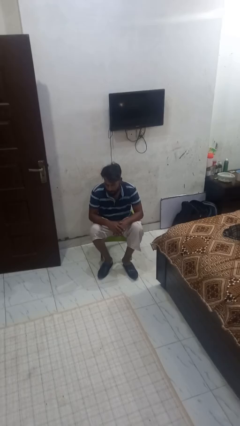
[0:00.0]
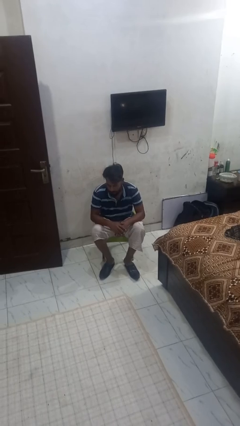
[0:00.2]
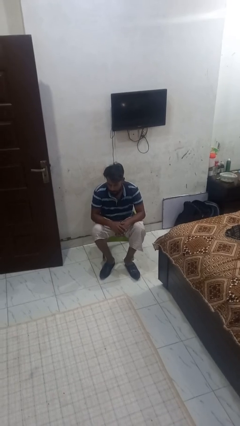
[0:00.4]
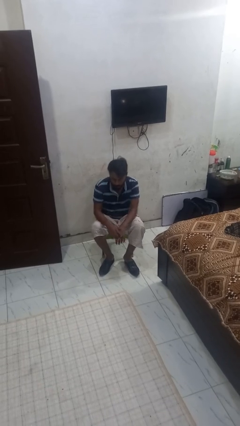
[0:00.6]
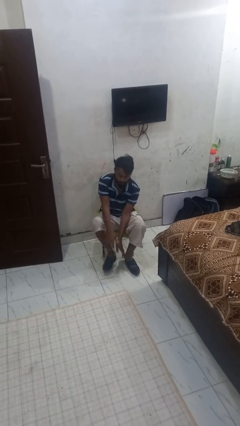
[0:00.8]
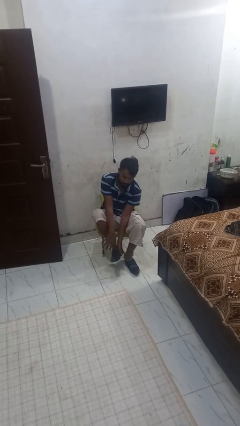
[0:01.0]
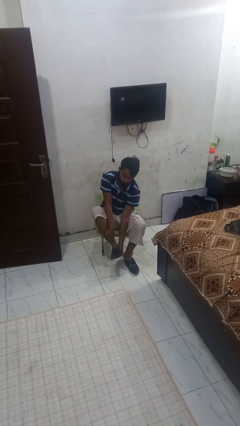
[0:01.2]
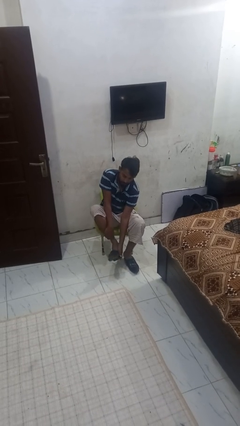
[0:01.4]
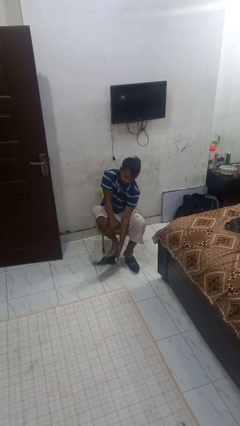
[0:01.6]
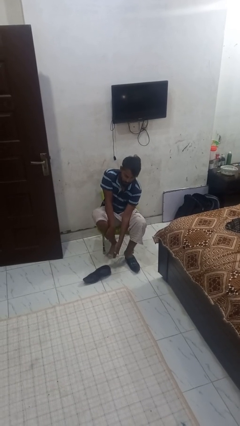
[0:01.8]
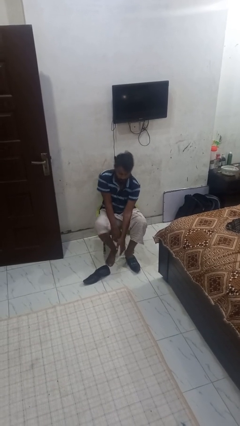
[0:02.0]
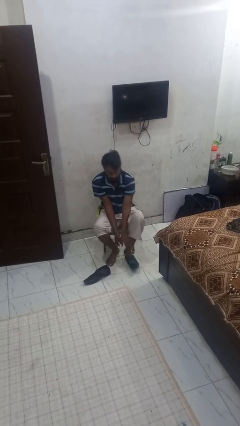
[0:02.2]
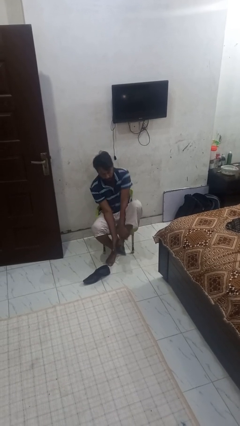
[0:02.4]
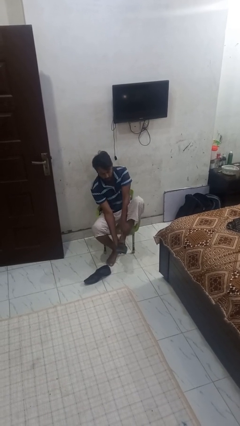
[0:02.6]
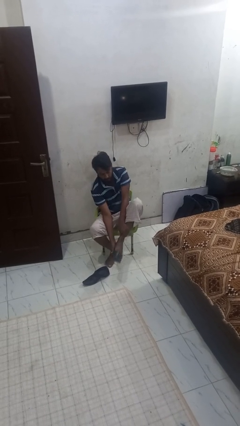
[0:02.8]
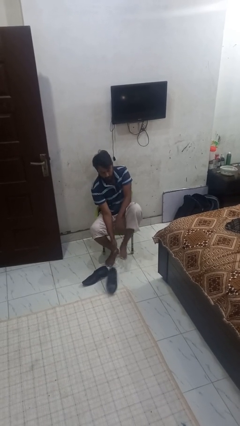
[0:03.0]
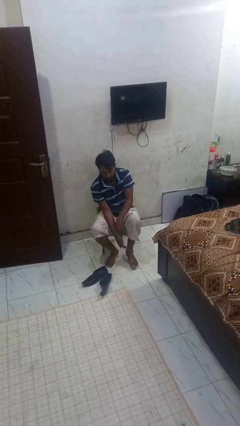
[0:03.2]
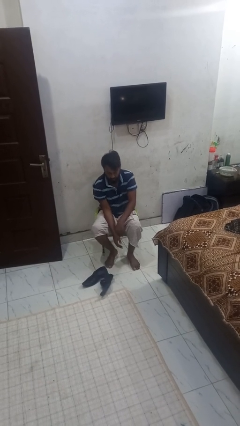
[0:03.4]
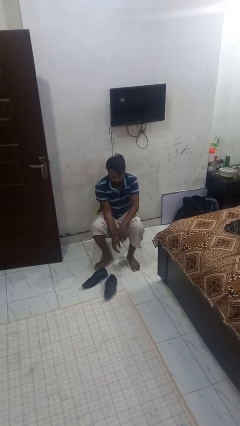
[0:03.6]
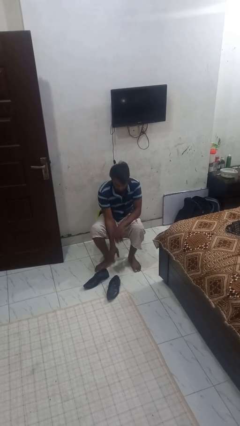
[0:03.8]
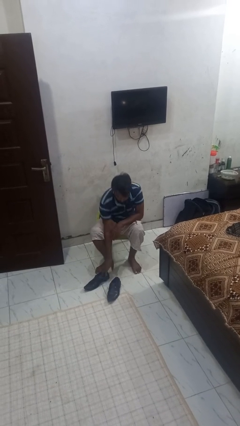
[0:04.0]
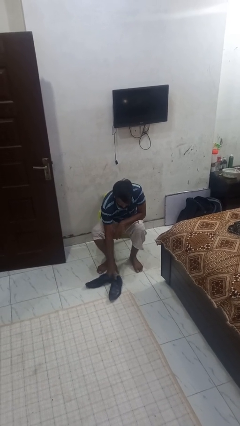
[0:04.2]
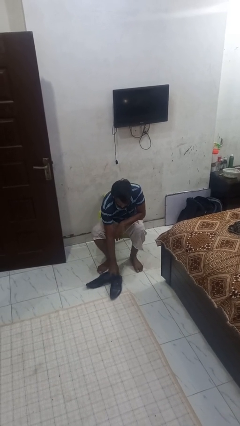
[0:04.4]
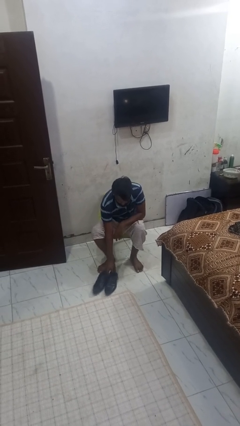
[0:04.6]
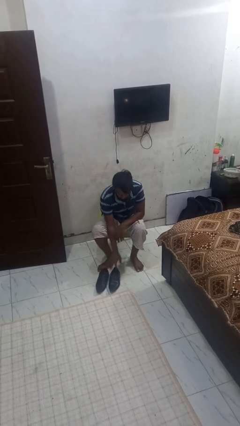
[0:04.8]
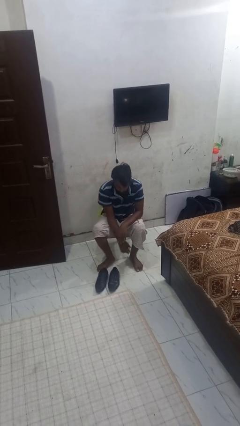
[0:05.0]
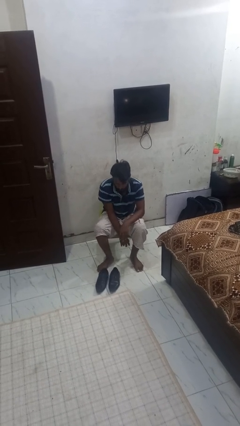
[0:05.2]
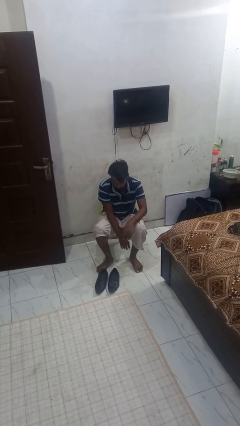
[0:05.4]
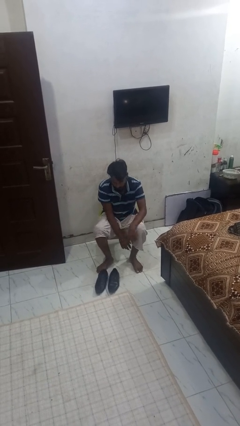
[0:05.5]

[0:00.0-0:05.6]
person takes off shoes

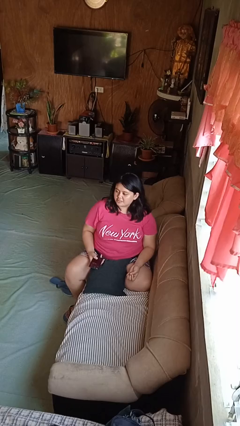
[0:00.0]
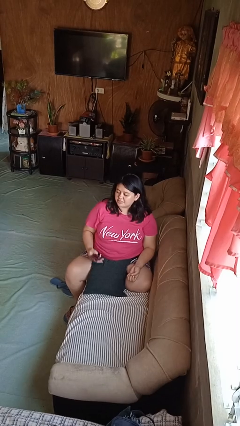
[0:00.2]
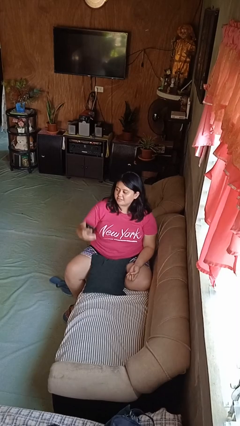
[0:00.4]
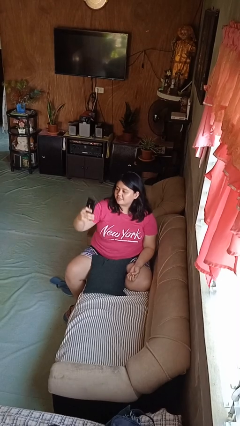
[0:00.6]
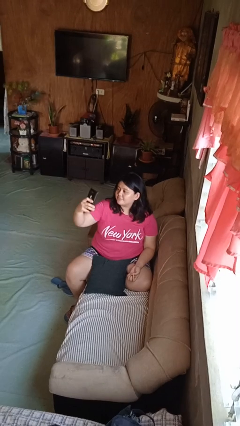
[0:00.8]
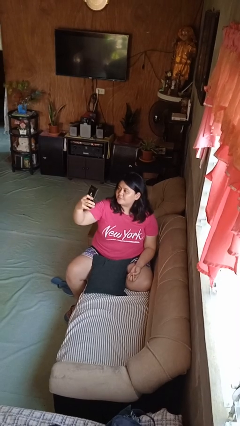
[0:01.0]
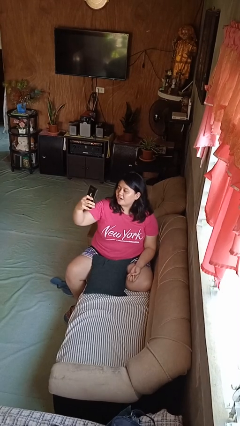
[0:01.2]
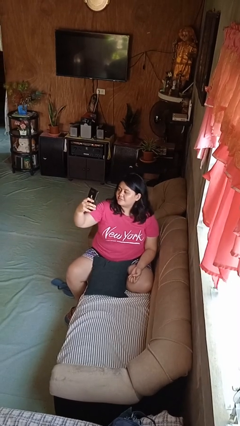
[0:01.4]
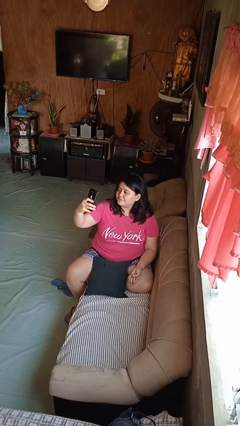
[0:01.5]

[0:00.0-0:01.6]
person takes selfie

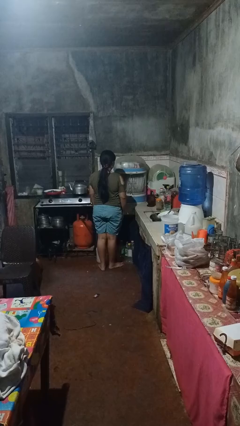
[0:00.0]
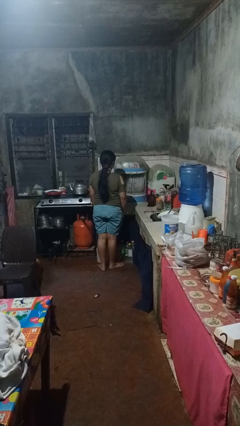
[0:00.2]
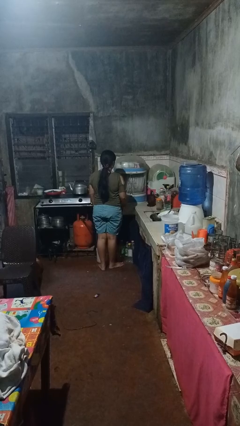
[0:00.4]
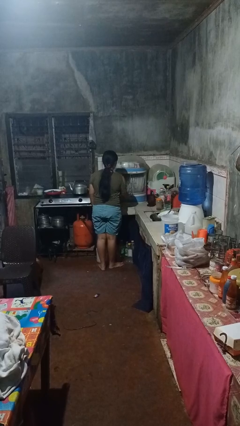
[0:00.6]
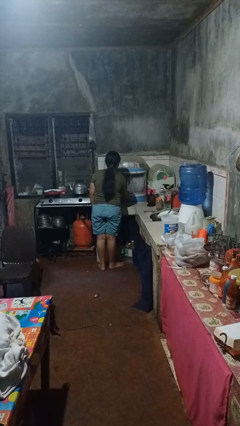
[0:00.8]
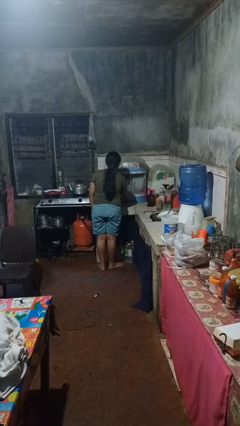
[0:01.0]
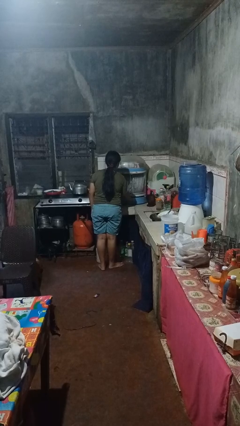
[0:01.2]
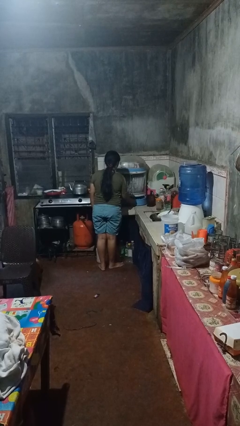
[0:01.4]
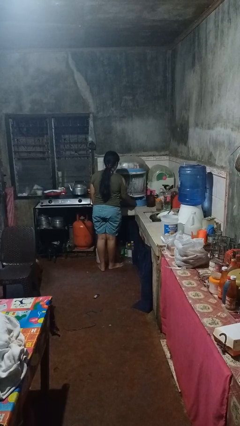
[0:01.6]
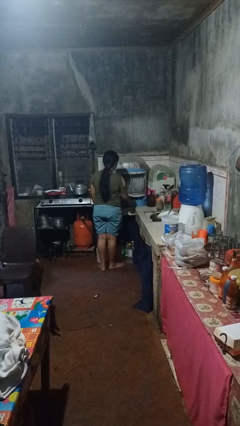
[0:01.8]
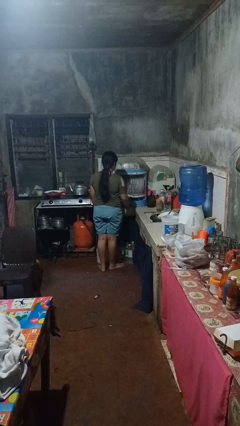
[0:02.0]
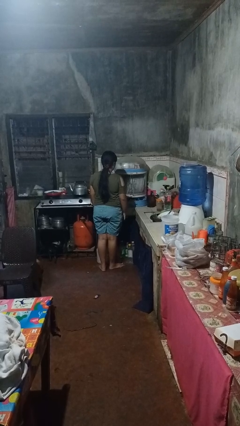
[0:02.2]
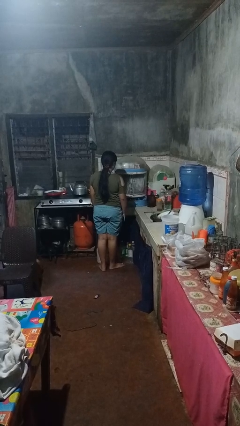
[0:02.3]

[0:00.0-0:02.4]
person opens kitchen drawer

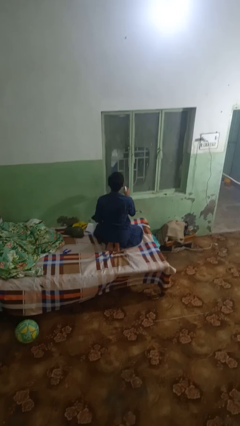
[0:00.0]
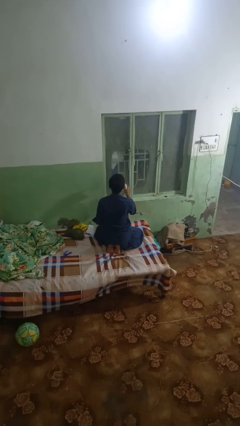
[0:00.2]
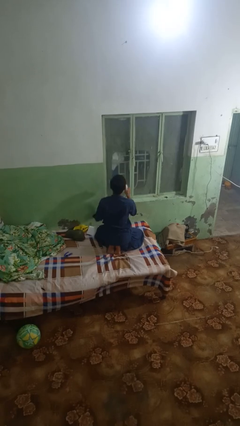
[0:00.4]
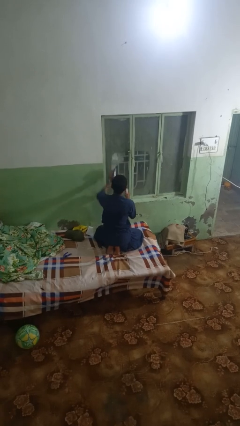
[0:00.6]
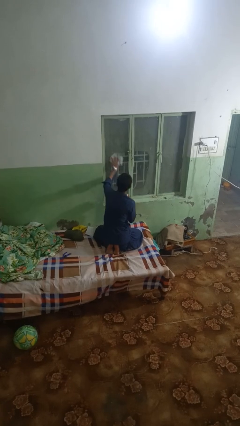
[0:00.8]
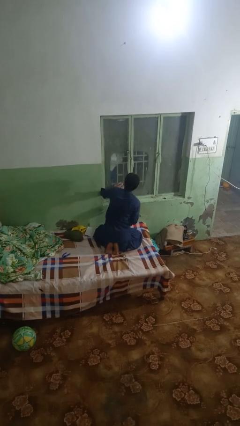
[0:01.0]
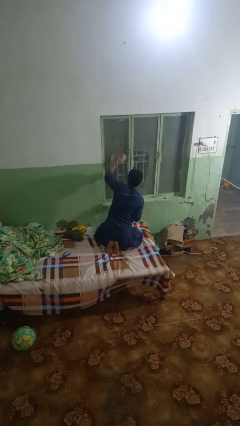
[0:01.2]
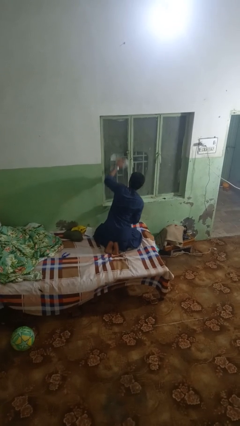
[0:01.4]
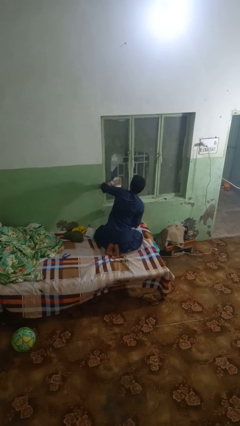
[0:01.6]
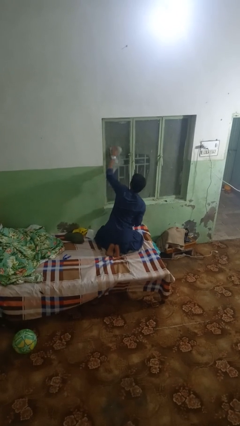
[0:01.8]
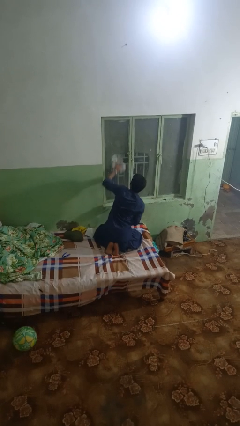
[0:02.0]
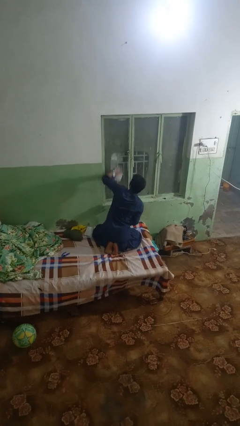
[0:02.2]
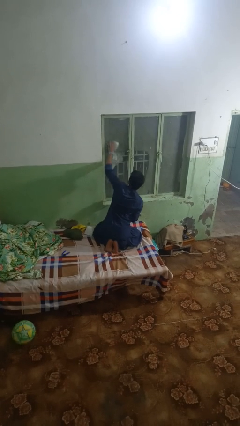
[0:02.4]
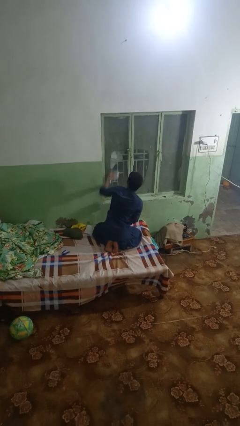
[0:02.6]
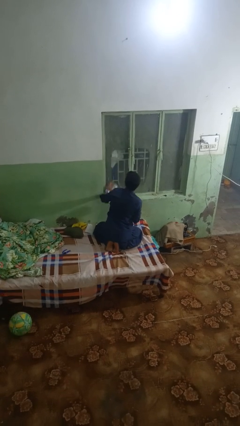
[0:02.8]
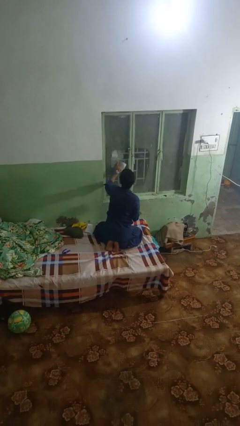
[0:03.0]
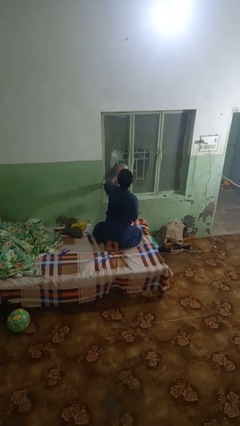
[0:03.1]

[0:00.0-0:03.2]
person washes window

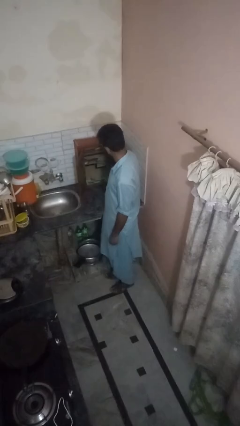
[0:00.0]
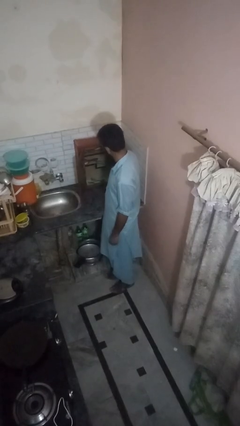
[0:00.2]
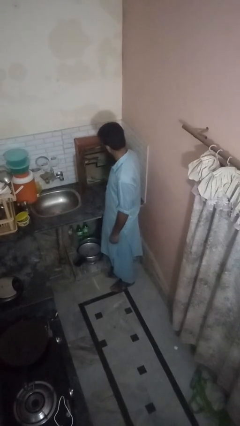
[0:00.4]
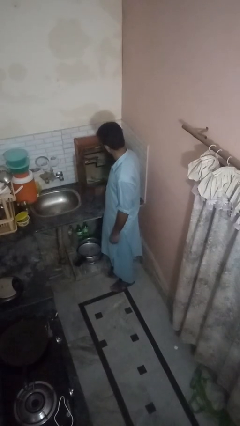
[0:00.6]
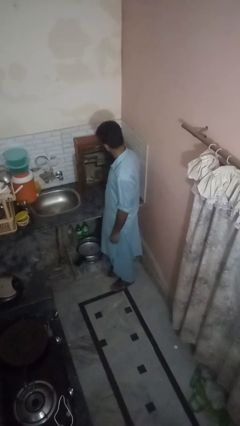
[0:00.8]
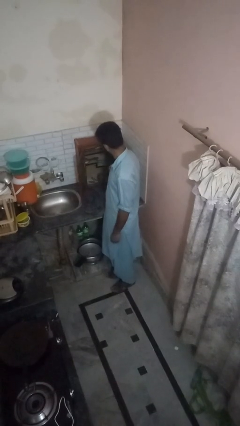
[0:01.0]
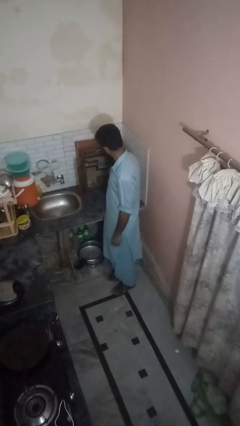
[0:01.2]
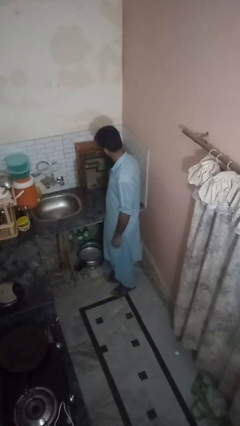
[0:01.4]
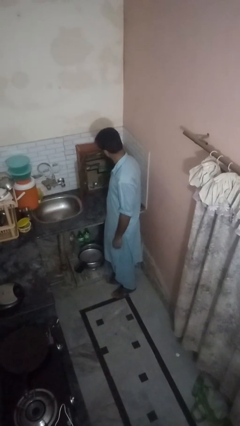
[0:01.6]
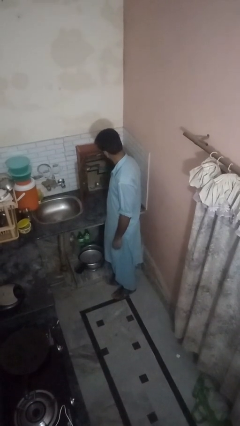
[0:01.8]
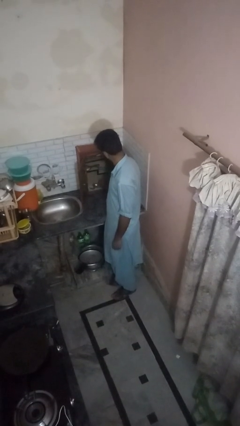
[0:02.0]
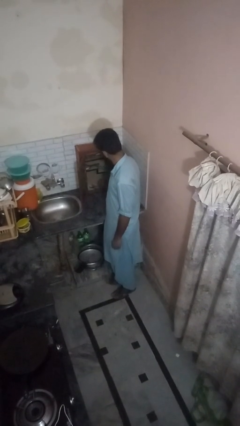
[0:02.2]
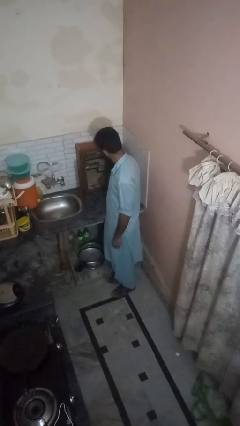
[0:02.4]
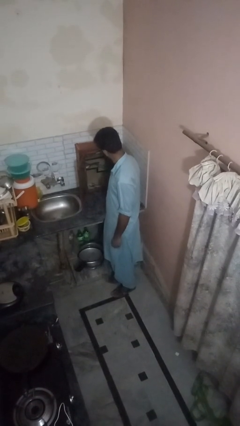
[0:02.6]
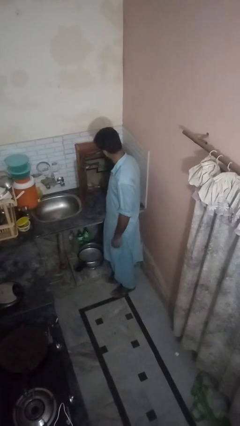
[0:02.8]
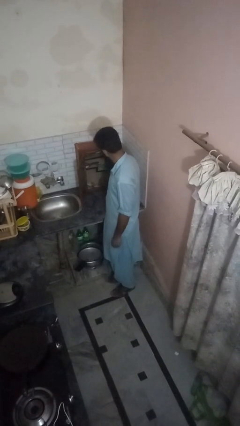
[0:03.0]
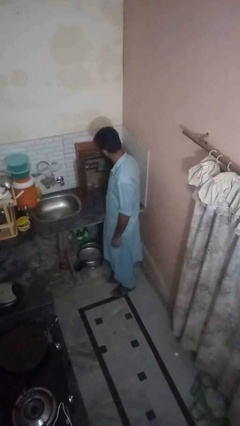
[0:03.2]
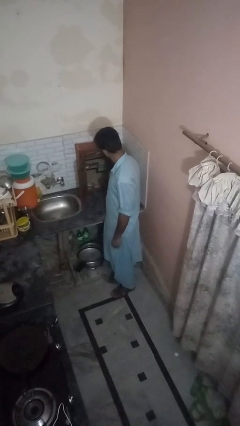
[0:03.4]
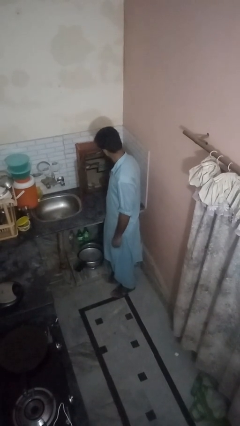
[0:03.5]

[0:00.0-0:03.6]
person searches in kitchen drawer

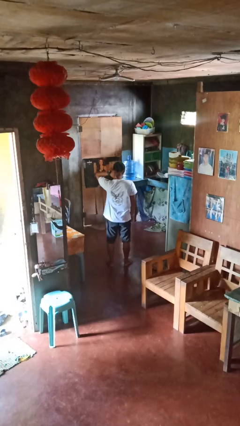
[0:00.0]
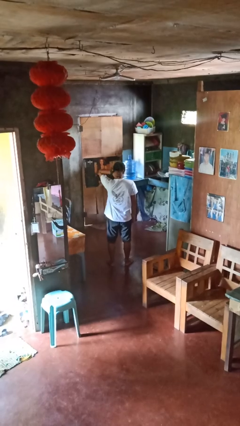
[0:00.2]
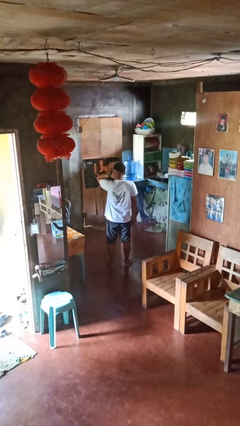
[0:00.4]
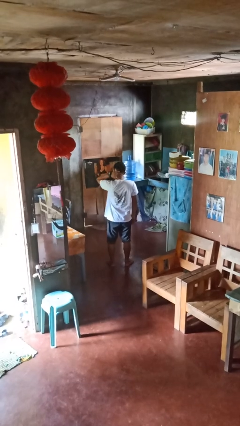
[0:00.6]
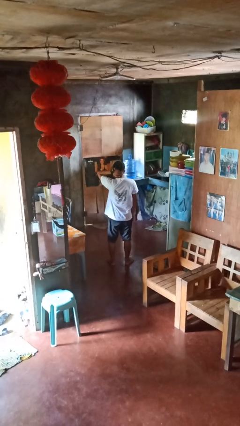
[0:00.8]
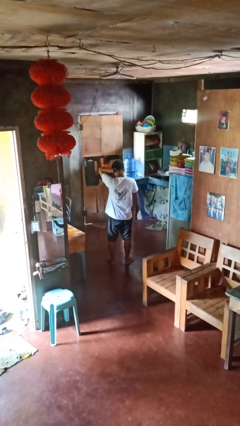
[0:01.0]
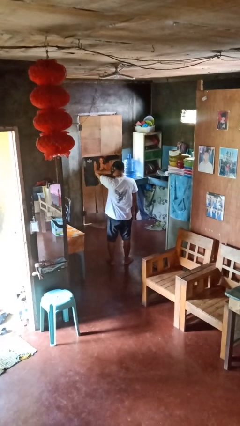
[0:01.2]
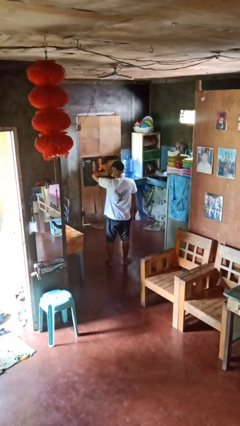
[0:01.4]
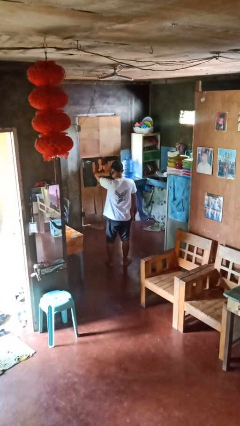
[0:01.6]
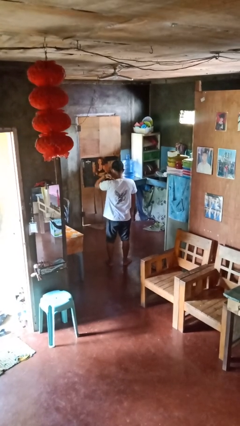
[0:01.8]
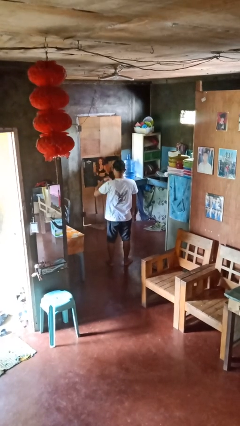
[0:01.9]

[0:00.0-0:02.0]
person rubs neck
